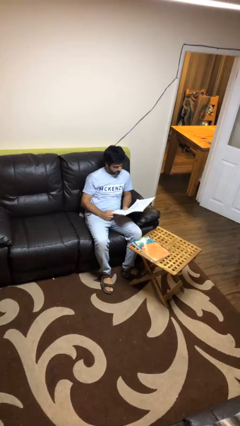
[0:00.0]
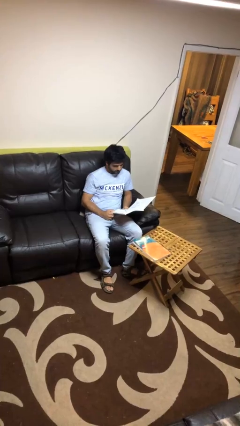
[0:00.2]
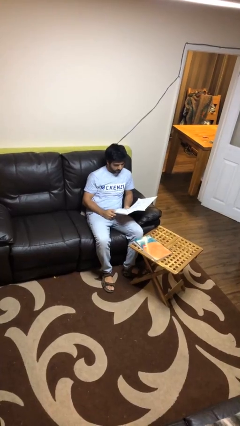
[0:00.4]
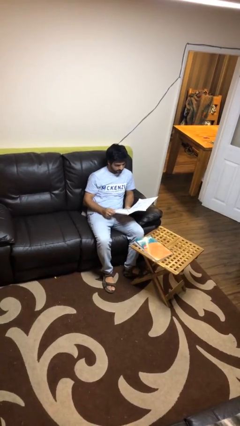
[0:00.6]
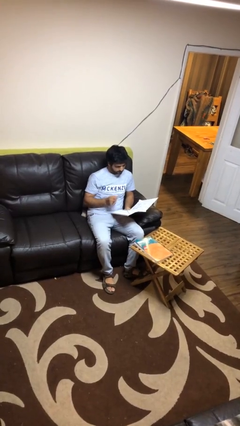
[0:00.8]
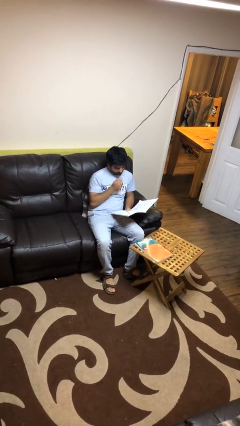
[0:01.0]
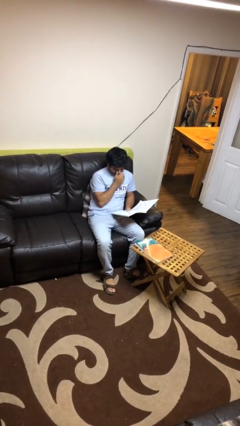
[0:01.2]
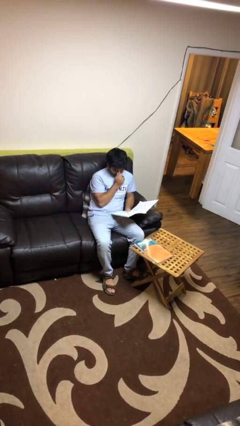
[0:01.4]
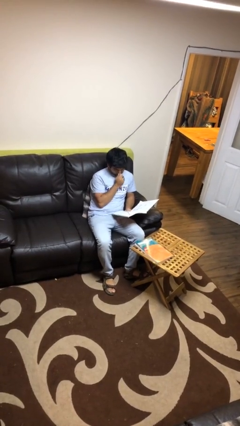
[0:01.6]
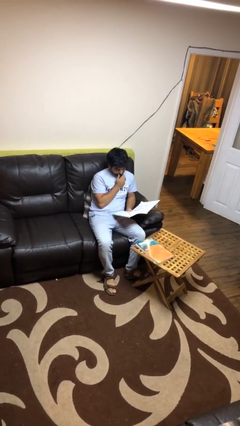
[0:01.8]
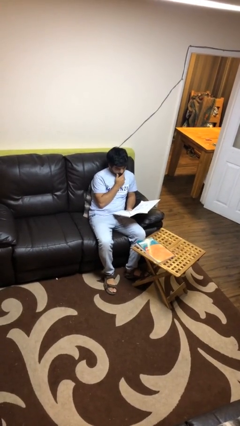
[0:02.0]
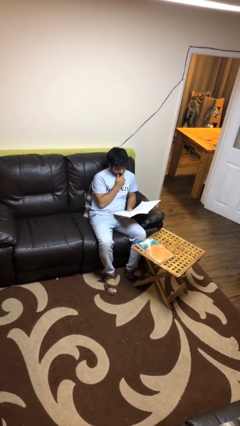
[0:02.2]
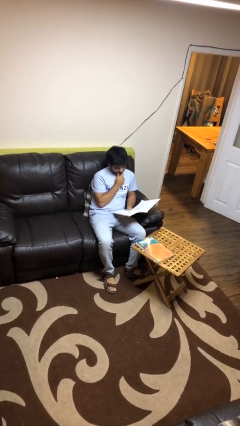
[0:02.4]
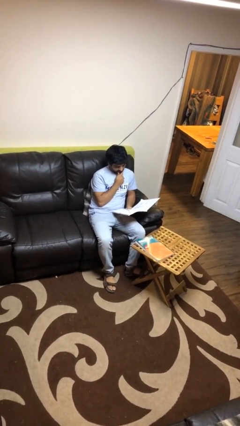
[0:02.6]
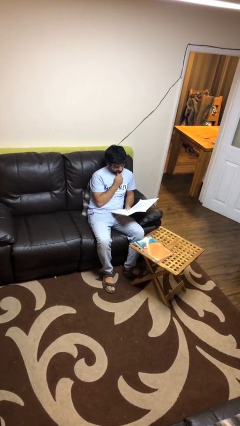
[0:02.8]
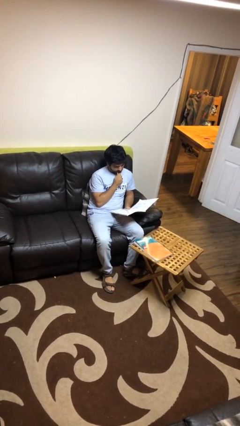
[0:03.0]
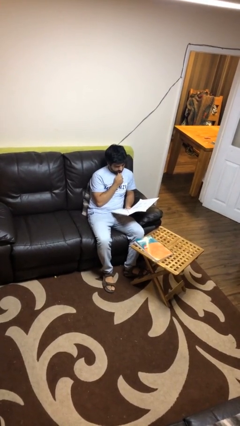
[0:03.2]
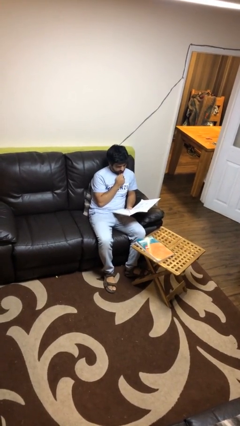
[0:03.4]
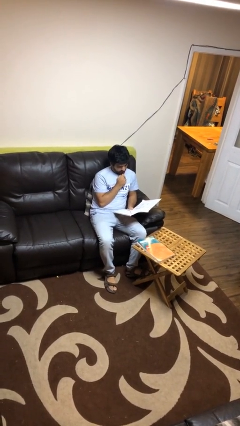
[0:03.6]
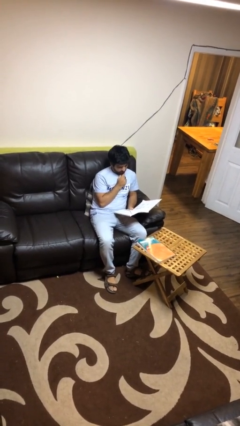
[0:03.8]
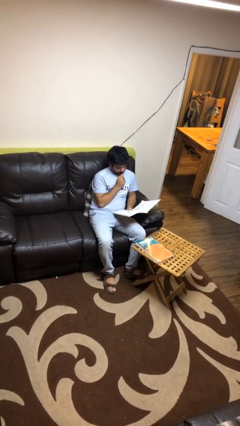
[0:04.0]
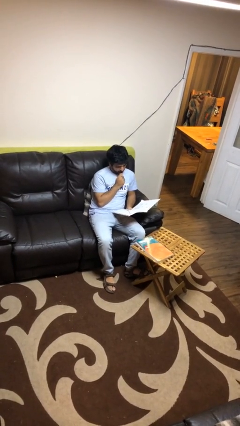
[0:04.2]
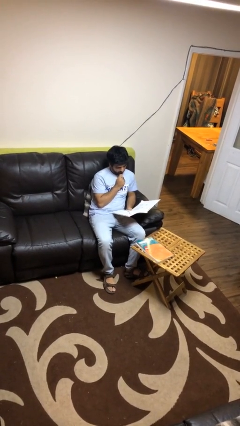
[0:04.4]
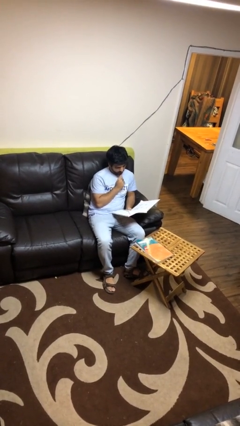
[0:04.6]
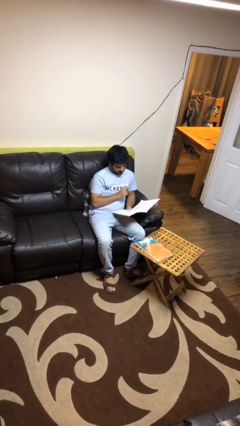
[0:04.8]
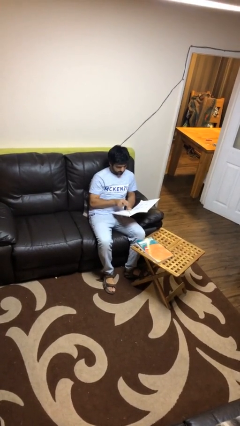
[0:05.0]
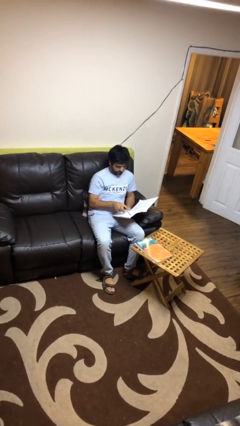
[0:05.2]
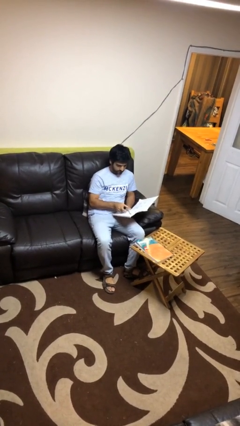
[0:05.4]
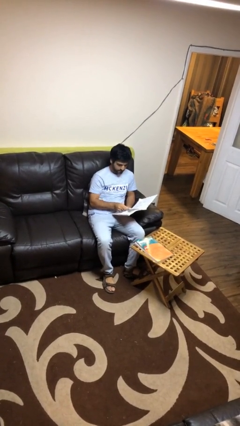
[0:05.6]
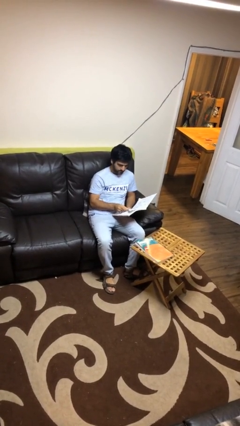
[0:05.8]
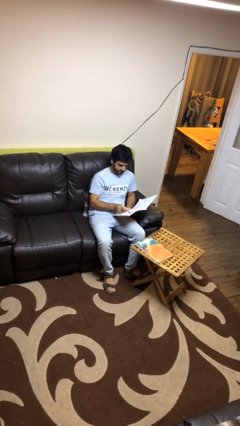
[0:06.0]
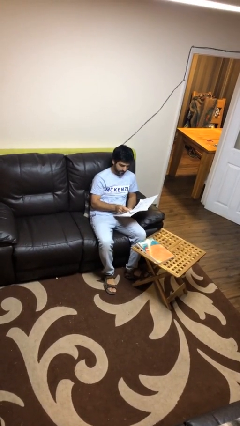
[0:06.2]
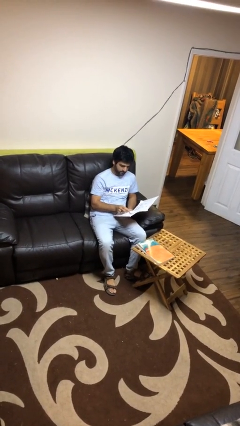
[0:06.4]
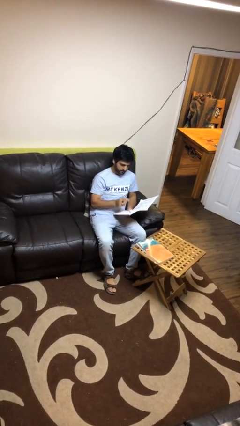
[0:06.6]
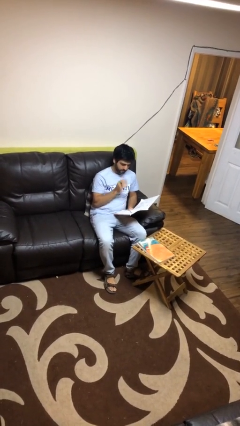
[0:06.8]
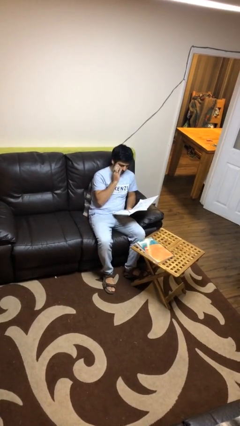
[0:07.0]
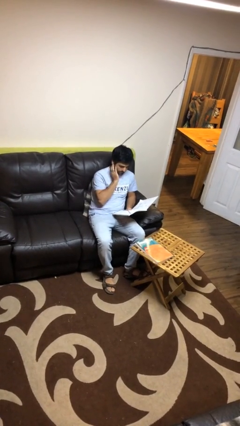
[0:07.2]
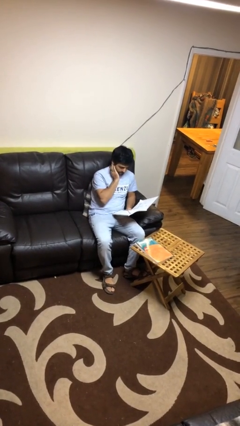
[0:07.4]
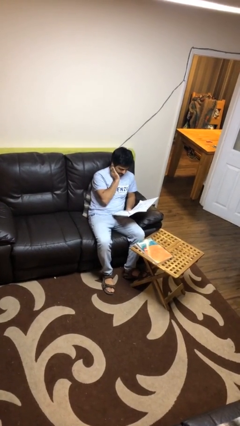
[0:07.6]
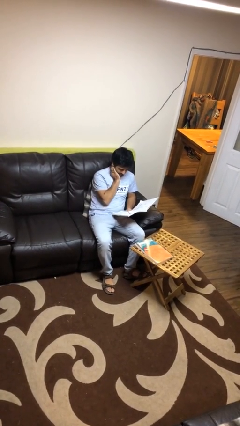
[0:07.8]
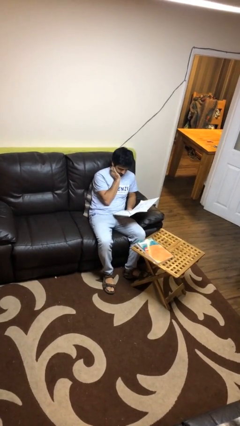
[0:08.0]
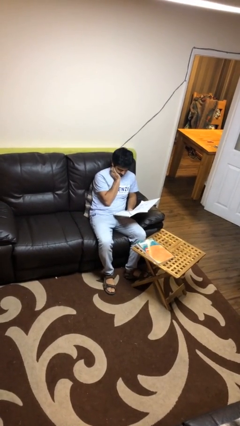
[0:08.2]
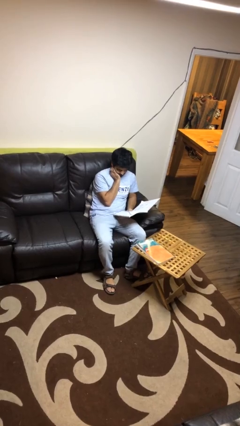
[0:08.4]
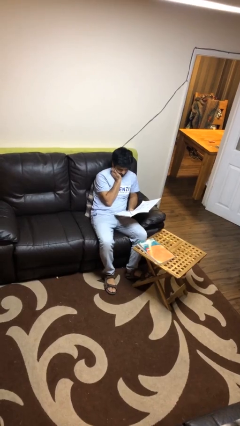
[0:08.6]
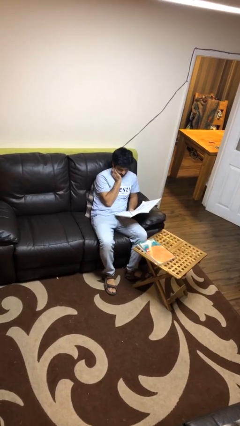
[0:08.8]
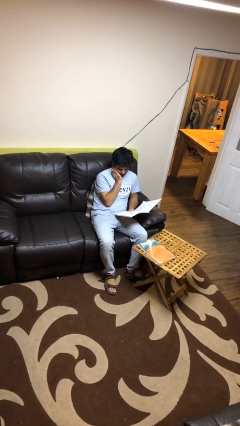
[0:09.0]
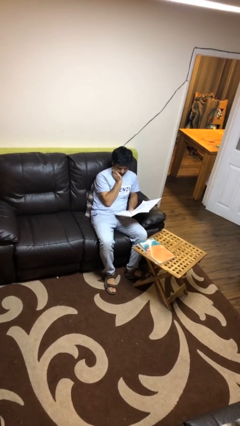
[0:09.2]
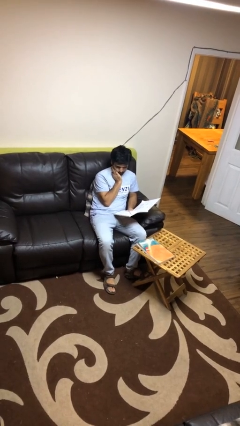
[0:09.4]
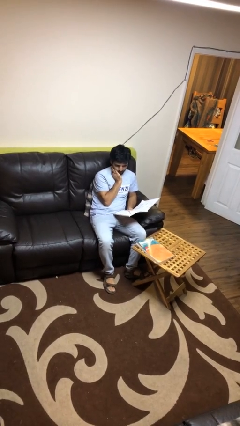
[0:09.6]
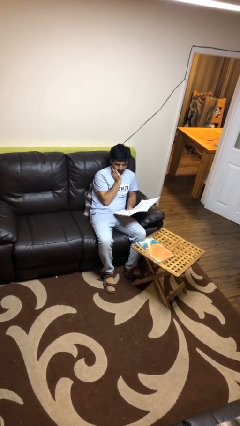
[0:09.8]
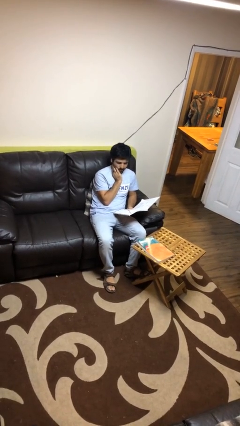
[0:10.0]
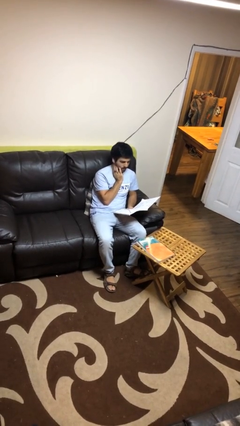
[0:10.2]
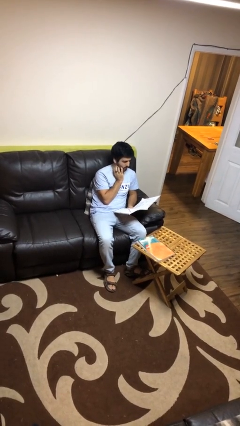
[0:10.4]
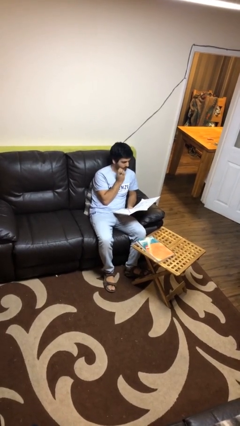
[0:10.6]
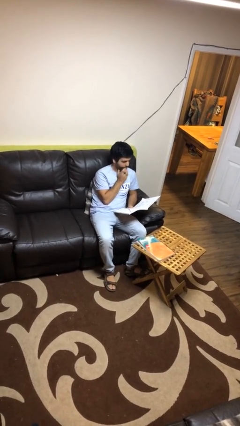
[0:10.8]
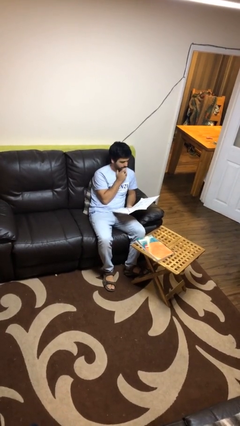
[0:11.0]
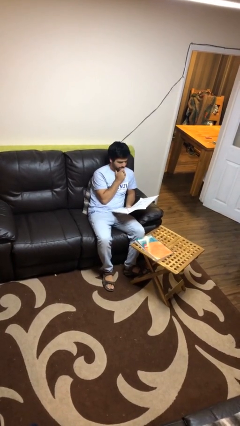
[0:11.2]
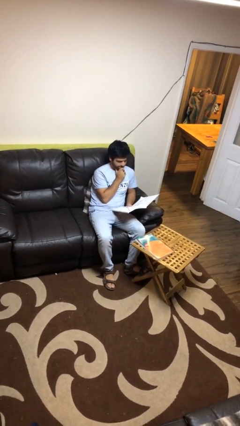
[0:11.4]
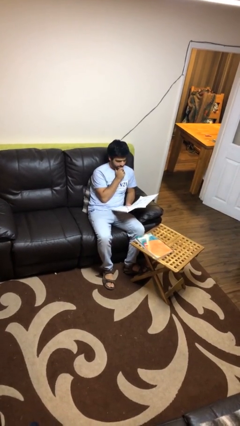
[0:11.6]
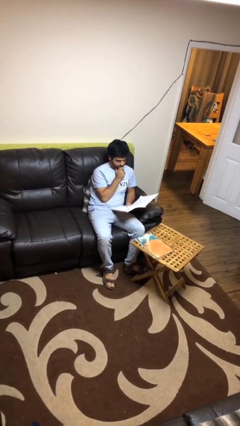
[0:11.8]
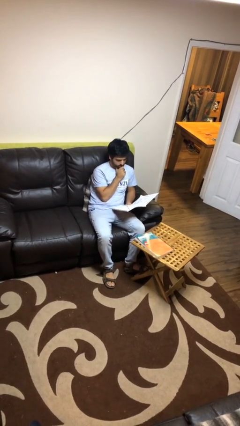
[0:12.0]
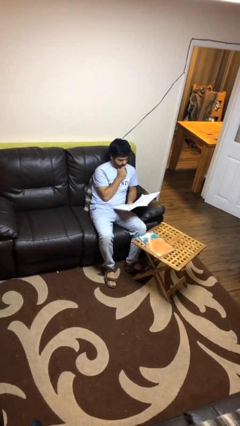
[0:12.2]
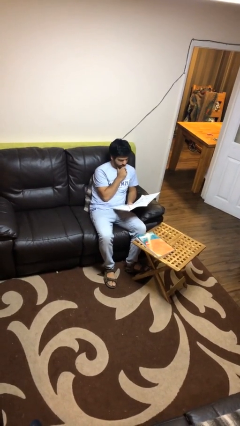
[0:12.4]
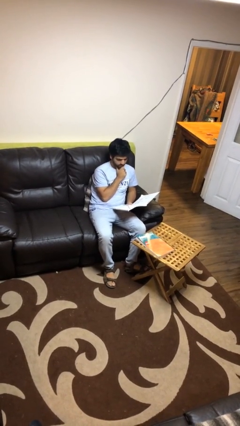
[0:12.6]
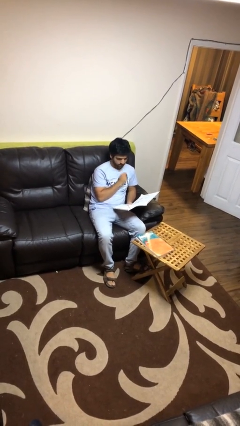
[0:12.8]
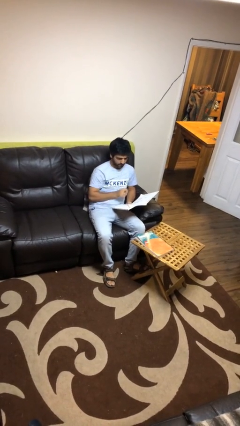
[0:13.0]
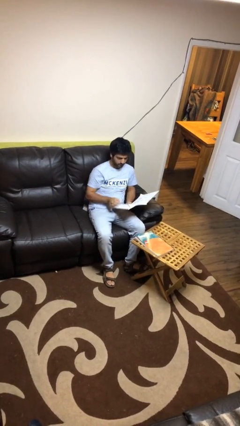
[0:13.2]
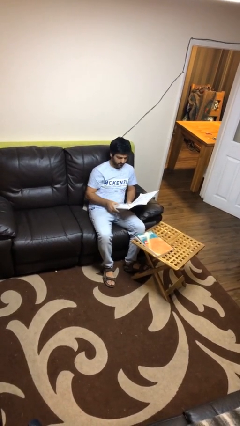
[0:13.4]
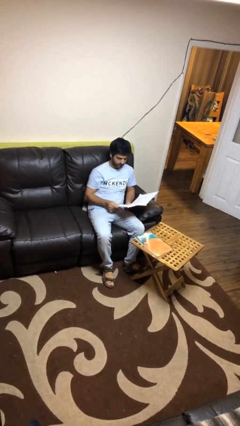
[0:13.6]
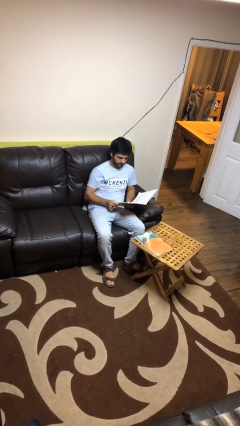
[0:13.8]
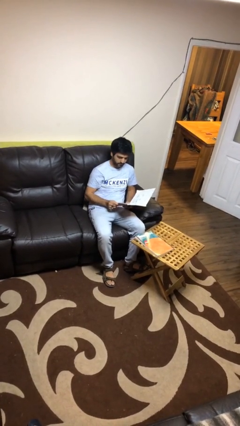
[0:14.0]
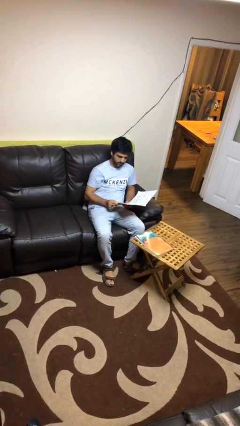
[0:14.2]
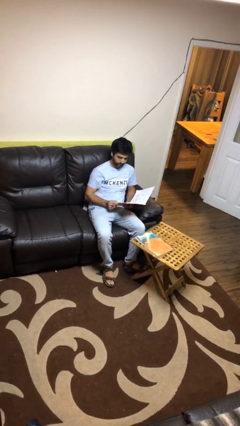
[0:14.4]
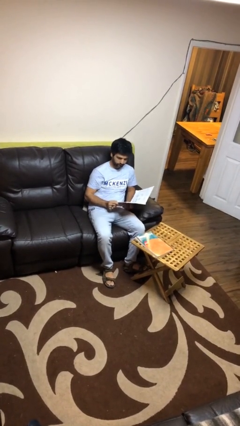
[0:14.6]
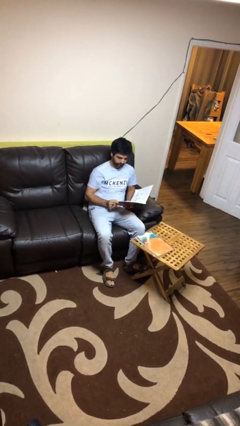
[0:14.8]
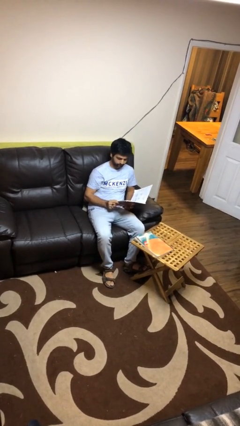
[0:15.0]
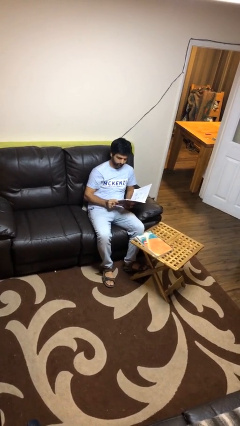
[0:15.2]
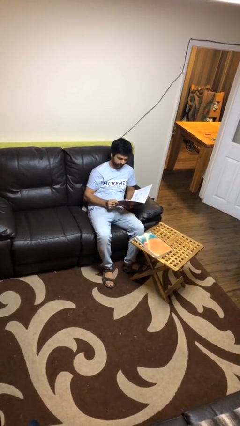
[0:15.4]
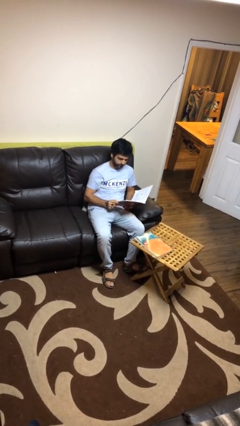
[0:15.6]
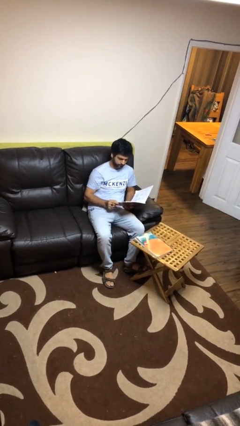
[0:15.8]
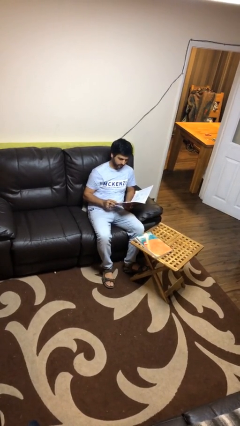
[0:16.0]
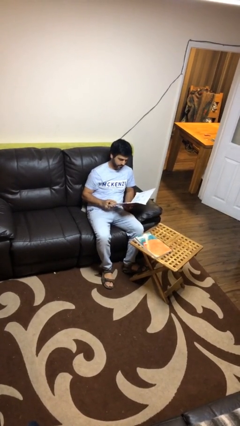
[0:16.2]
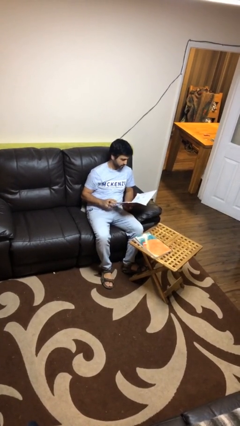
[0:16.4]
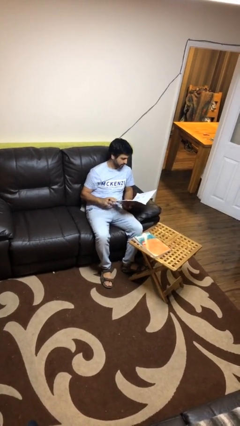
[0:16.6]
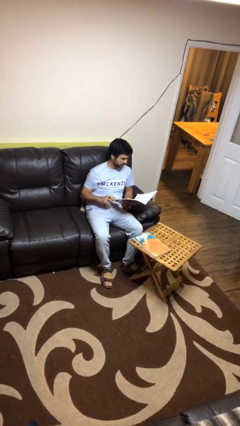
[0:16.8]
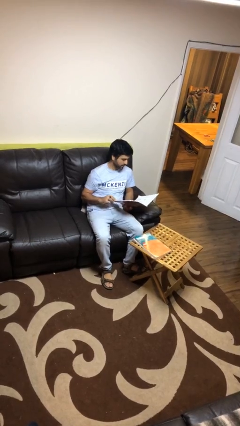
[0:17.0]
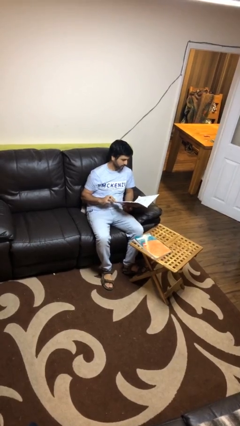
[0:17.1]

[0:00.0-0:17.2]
person reads document

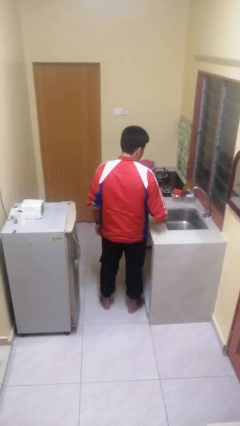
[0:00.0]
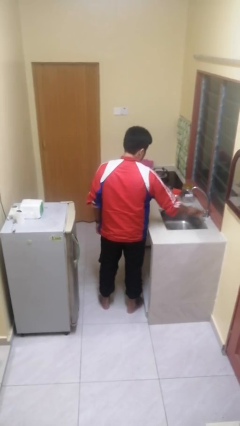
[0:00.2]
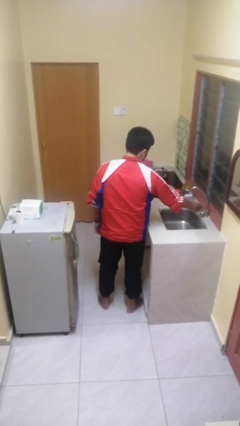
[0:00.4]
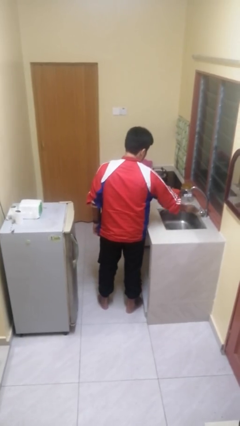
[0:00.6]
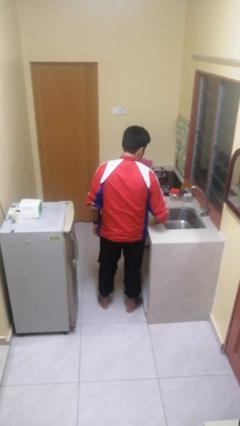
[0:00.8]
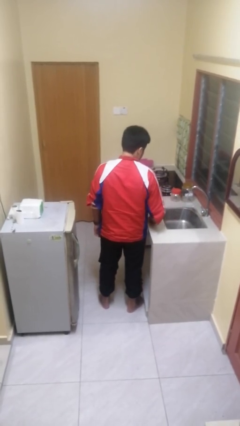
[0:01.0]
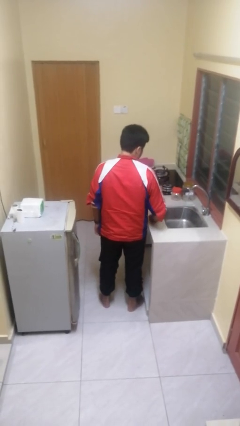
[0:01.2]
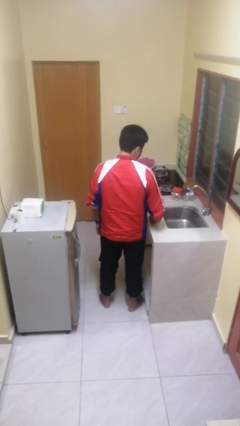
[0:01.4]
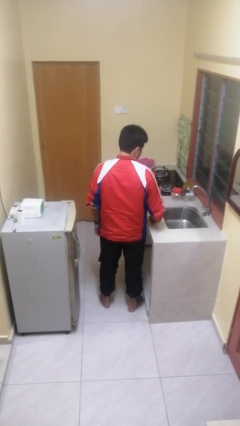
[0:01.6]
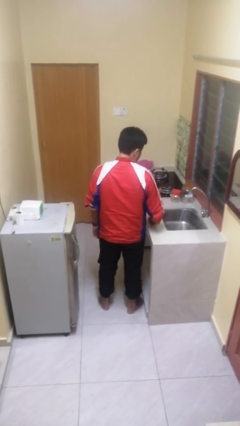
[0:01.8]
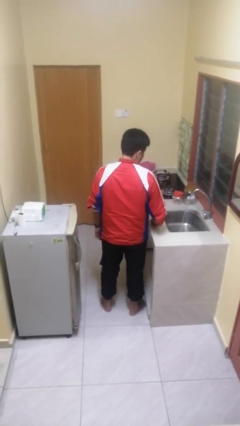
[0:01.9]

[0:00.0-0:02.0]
person turns on faucet
